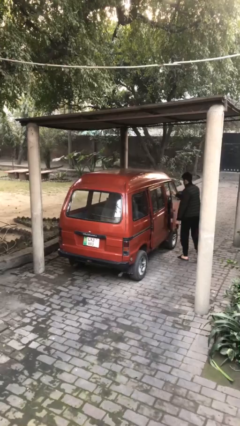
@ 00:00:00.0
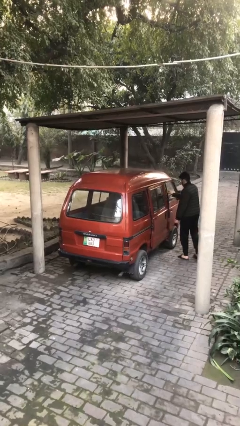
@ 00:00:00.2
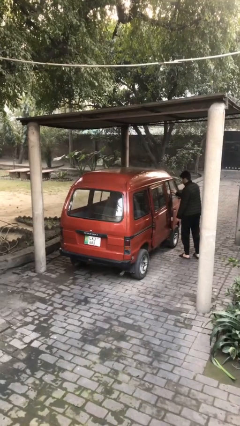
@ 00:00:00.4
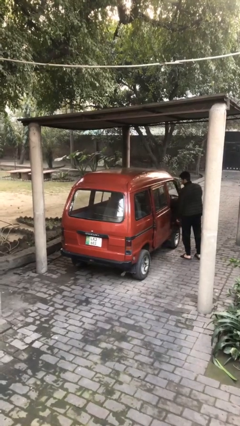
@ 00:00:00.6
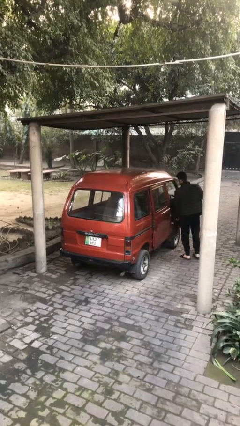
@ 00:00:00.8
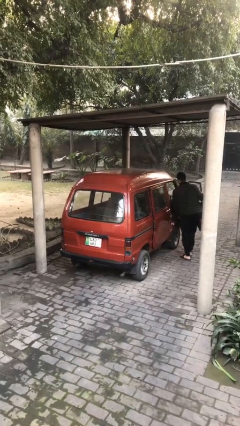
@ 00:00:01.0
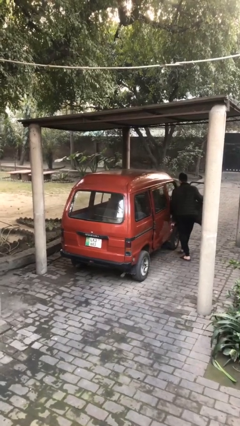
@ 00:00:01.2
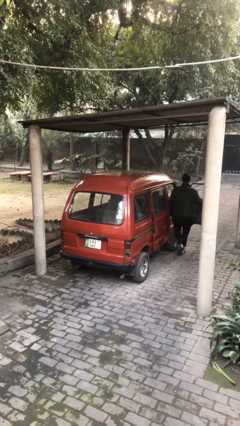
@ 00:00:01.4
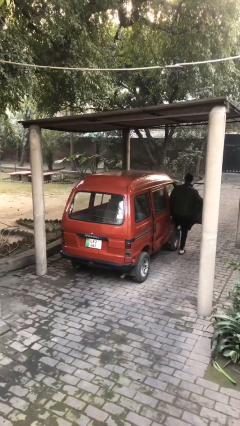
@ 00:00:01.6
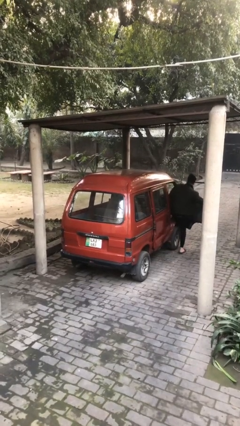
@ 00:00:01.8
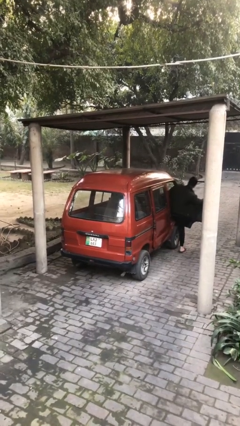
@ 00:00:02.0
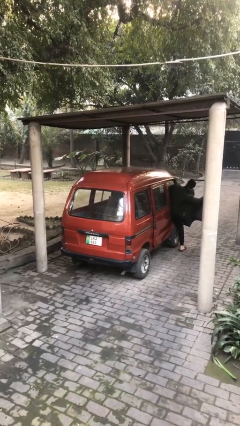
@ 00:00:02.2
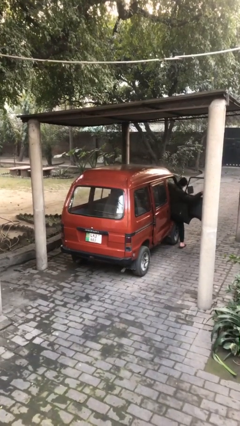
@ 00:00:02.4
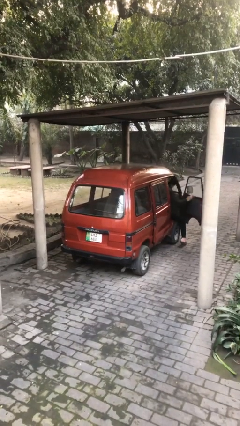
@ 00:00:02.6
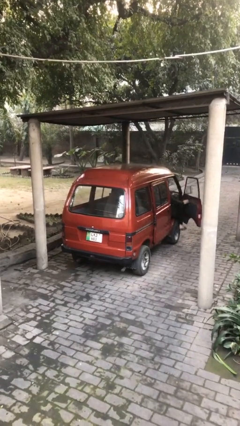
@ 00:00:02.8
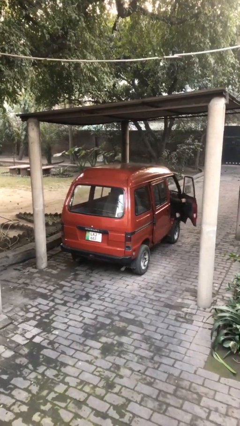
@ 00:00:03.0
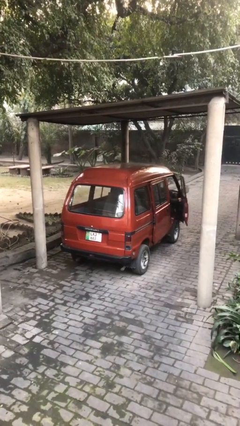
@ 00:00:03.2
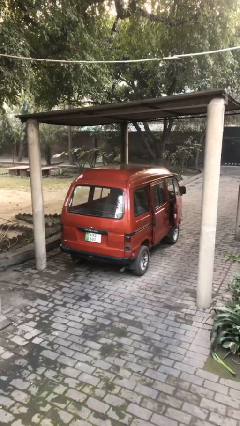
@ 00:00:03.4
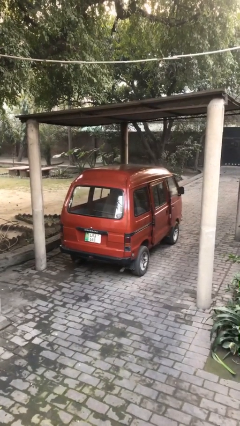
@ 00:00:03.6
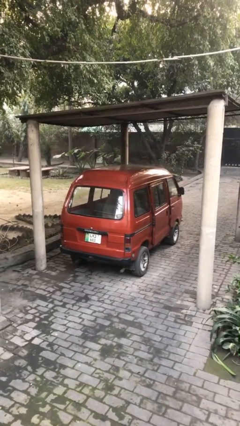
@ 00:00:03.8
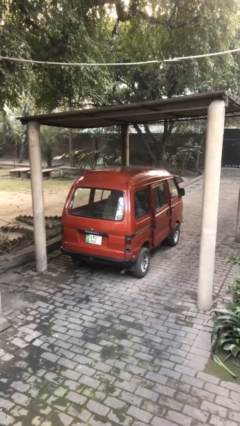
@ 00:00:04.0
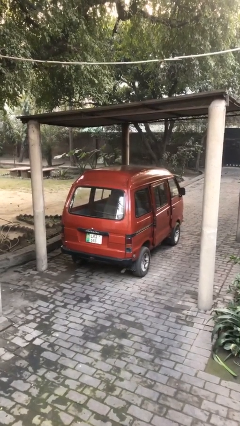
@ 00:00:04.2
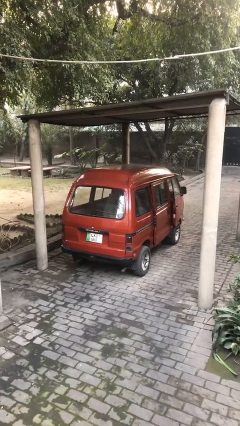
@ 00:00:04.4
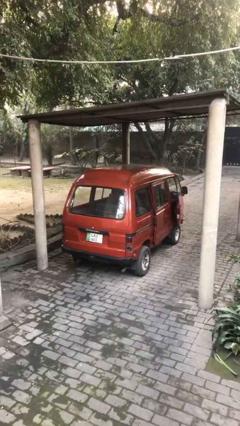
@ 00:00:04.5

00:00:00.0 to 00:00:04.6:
car picks up person

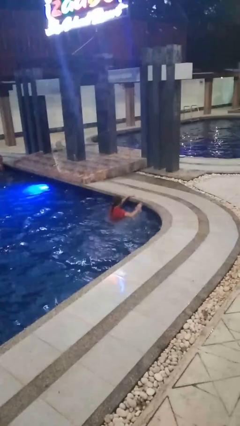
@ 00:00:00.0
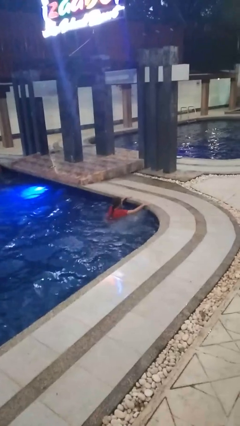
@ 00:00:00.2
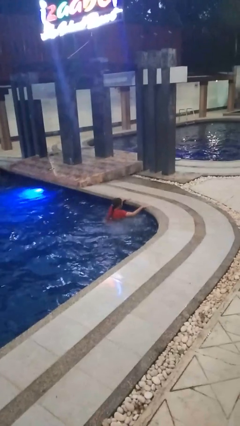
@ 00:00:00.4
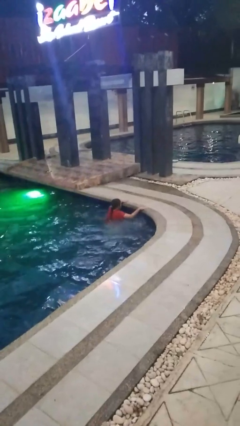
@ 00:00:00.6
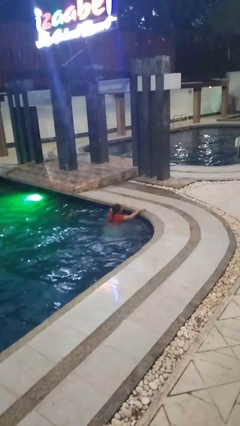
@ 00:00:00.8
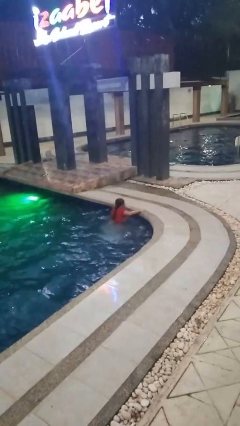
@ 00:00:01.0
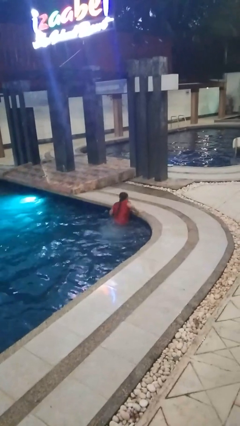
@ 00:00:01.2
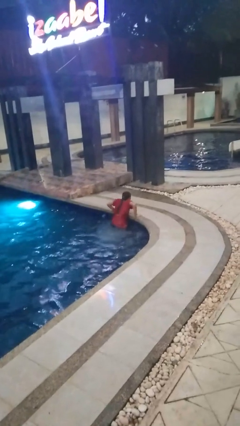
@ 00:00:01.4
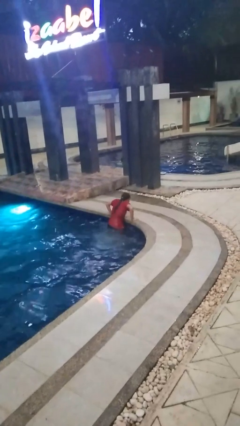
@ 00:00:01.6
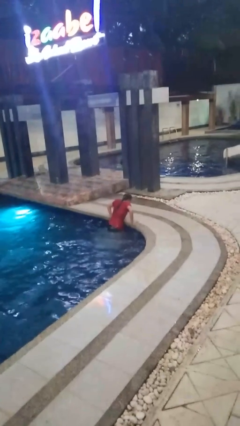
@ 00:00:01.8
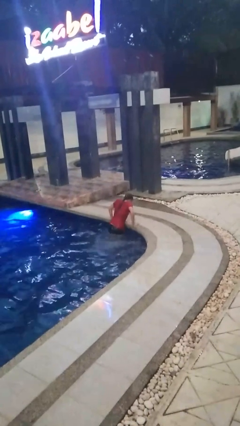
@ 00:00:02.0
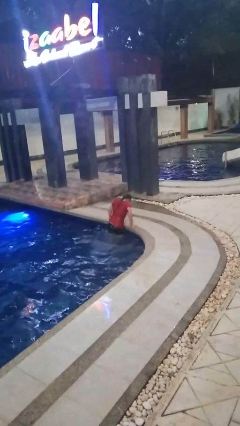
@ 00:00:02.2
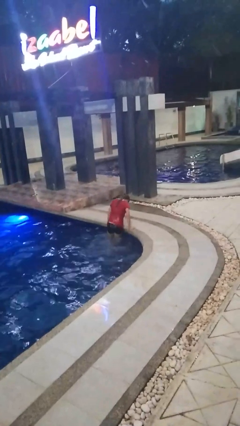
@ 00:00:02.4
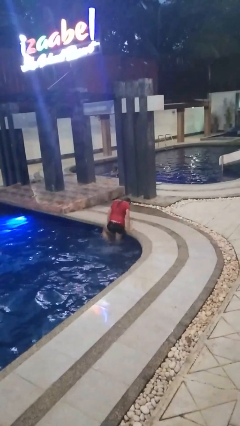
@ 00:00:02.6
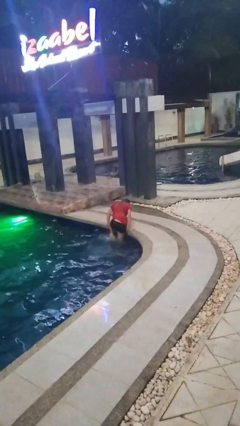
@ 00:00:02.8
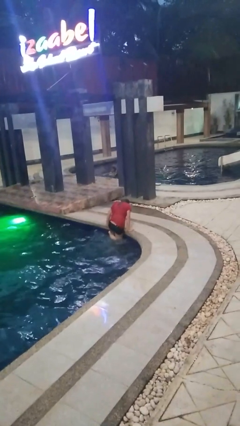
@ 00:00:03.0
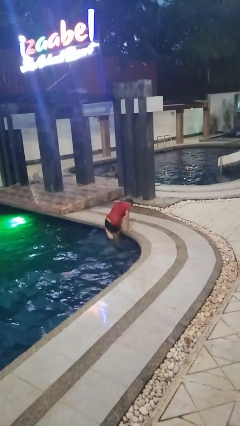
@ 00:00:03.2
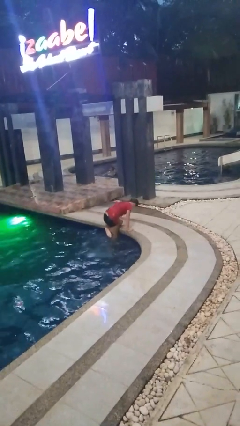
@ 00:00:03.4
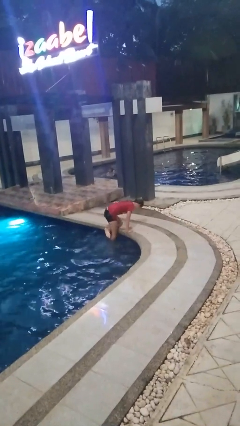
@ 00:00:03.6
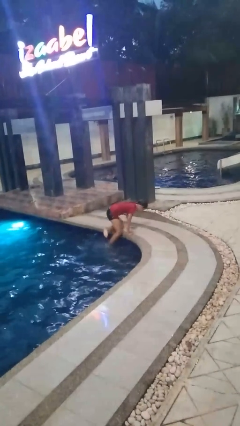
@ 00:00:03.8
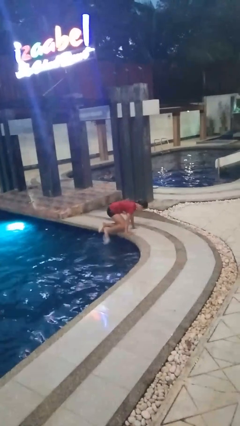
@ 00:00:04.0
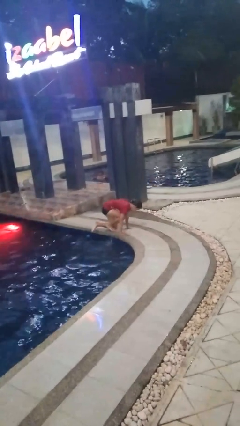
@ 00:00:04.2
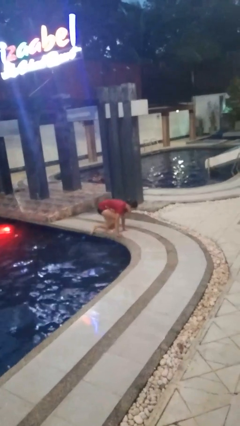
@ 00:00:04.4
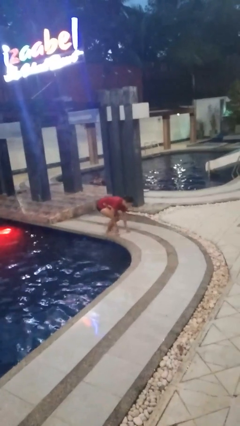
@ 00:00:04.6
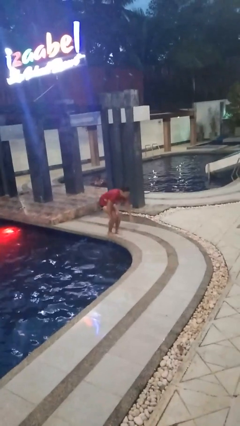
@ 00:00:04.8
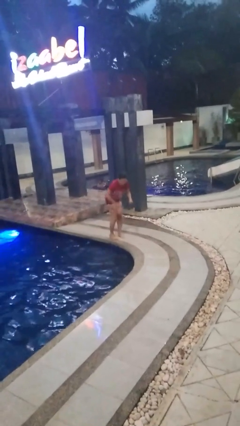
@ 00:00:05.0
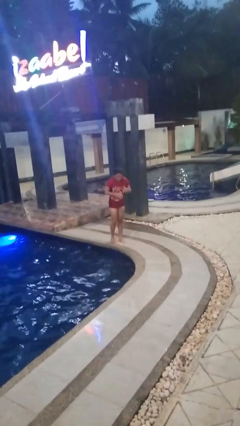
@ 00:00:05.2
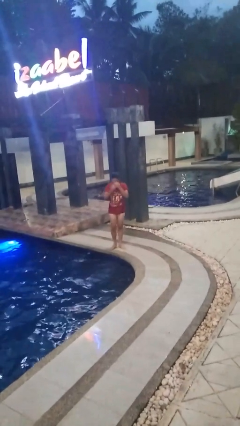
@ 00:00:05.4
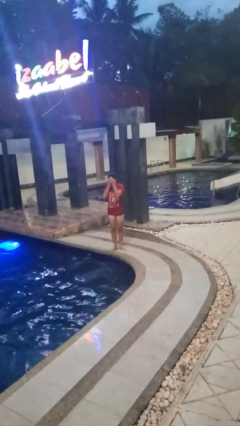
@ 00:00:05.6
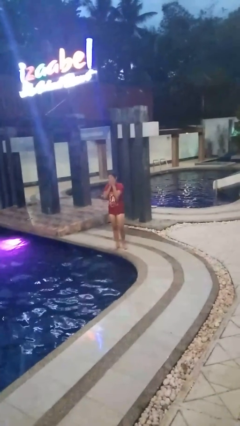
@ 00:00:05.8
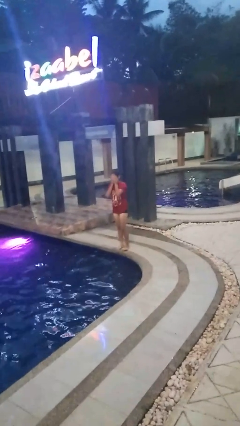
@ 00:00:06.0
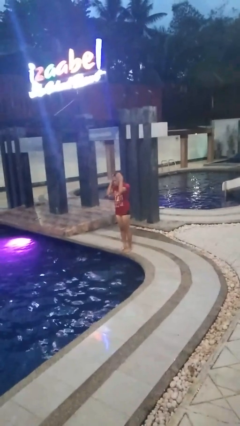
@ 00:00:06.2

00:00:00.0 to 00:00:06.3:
person exits pool

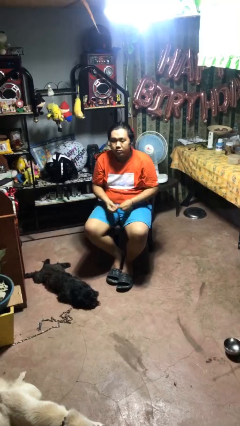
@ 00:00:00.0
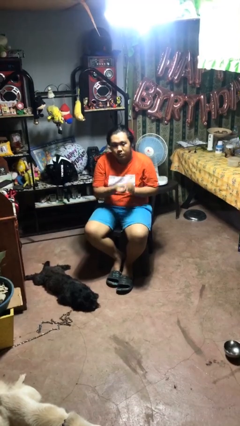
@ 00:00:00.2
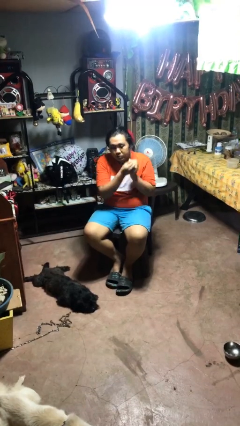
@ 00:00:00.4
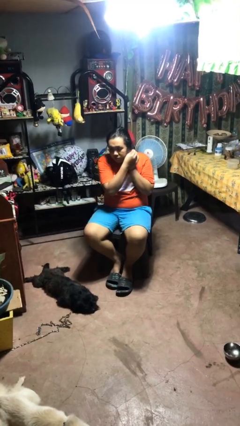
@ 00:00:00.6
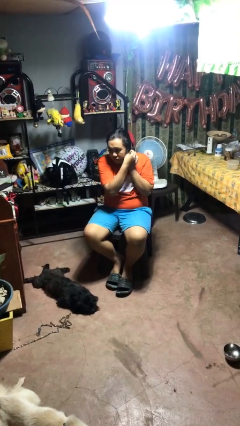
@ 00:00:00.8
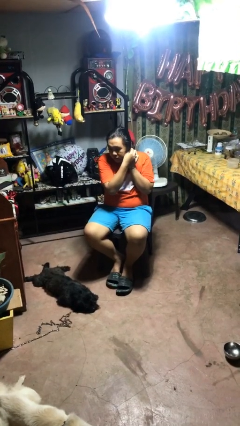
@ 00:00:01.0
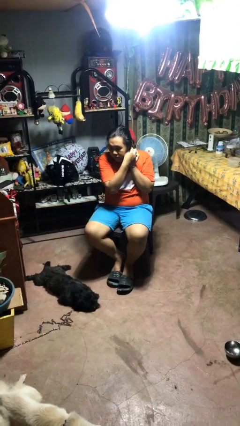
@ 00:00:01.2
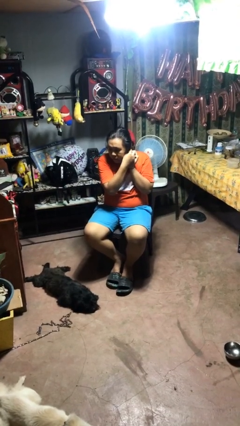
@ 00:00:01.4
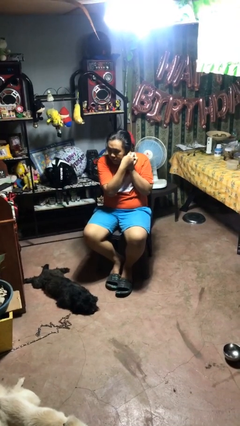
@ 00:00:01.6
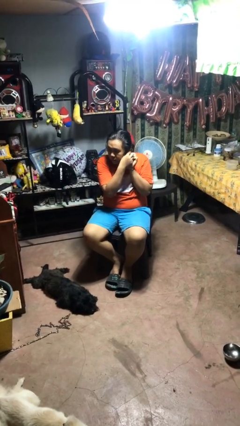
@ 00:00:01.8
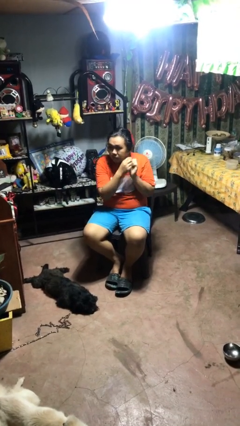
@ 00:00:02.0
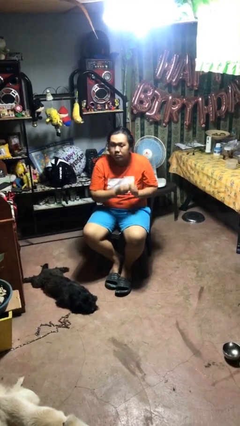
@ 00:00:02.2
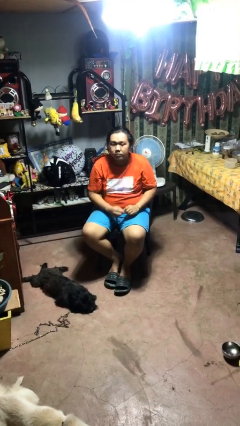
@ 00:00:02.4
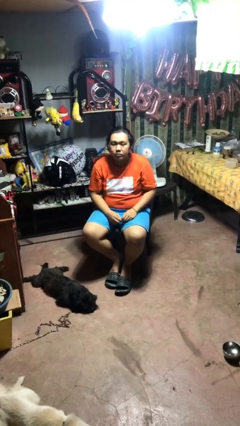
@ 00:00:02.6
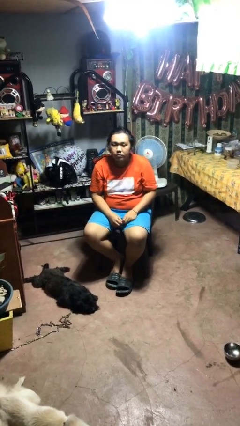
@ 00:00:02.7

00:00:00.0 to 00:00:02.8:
person puts on earrings

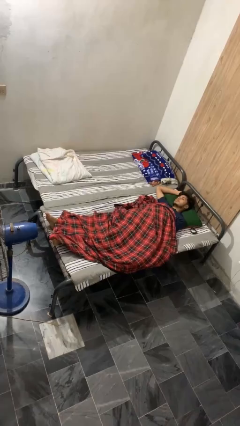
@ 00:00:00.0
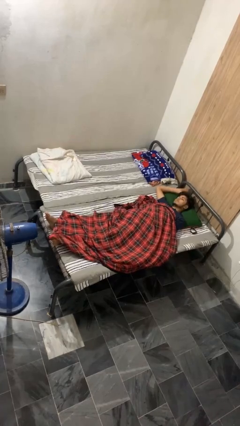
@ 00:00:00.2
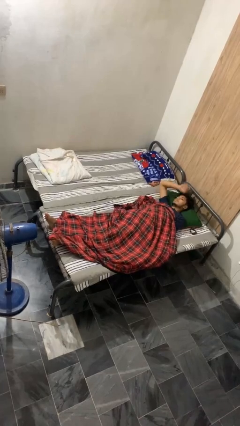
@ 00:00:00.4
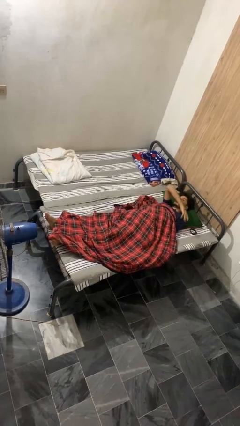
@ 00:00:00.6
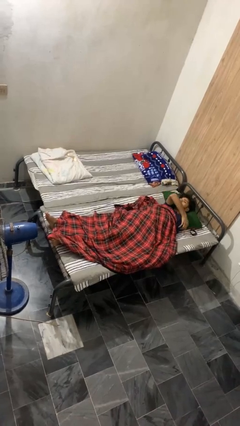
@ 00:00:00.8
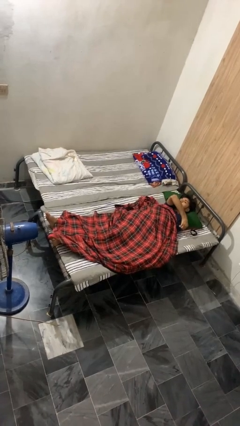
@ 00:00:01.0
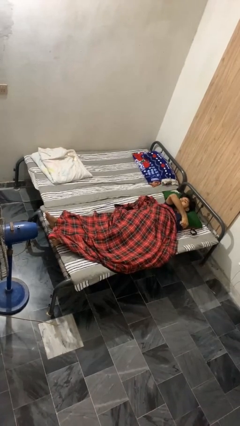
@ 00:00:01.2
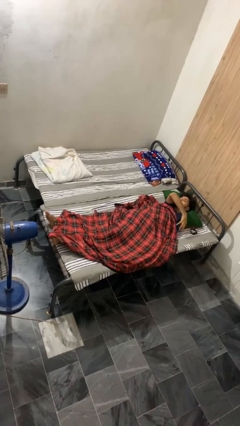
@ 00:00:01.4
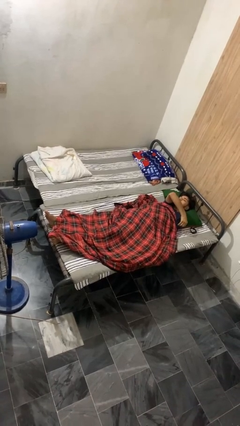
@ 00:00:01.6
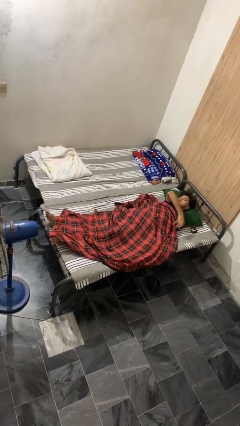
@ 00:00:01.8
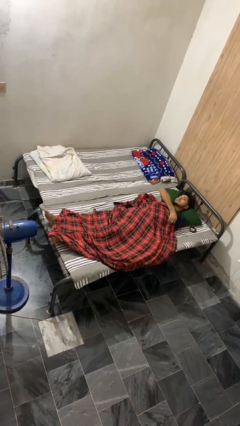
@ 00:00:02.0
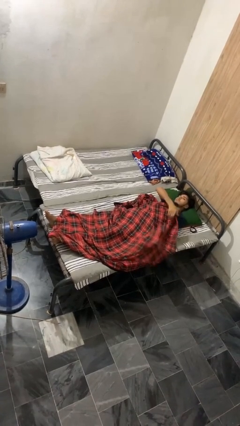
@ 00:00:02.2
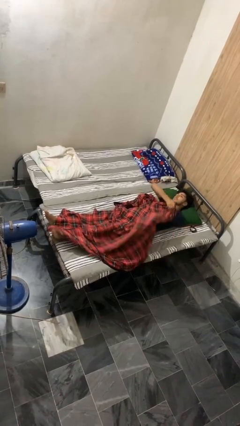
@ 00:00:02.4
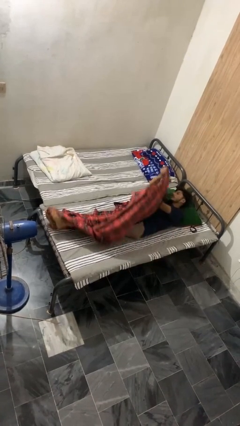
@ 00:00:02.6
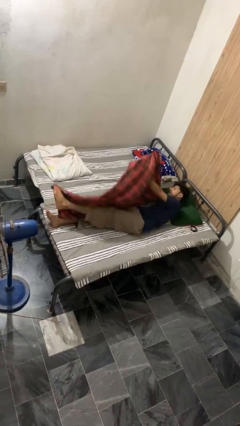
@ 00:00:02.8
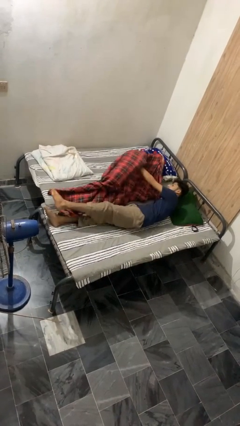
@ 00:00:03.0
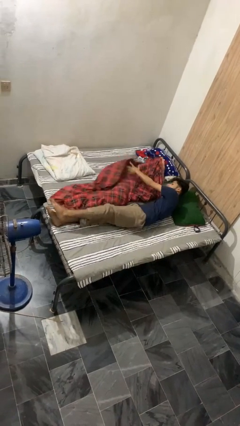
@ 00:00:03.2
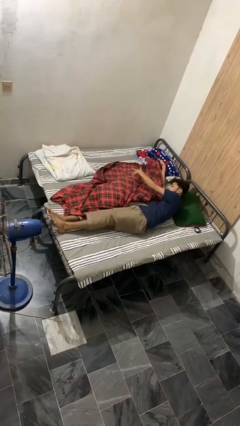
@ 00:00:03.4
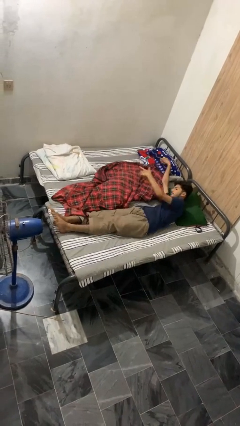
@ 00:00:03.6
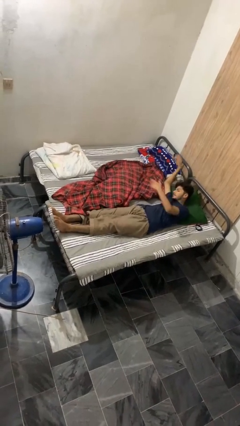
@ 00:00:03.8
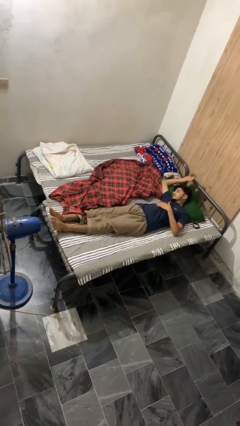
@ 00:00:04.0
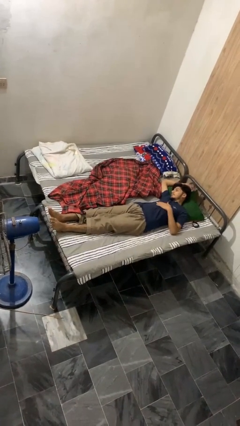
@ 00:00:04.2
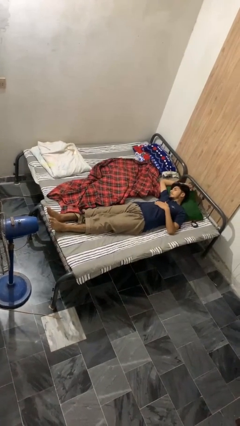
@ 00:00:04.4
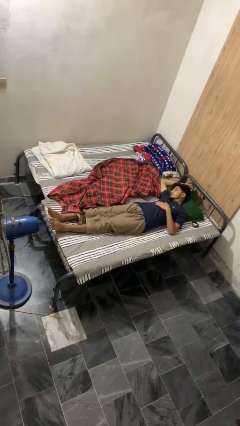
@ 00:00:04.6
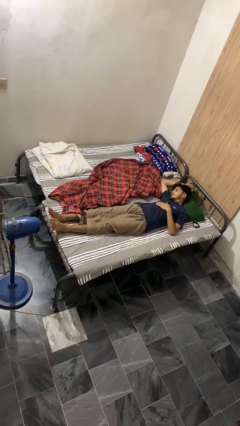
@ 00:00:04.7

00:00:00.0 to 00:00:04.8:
person uncovers with bedsheets
